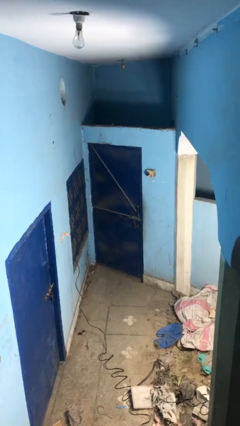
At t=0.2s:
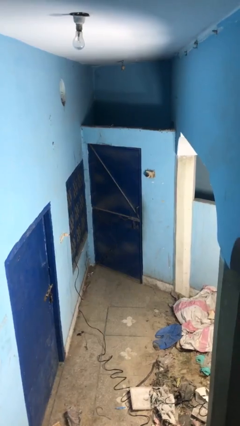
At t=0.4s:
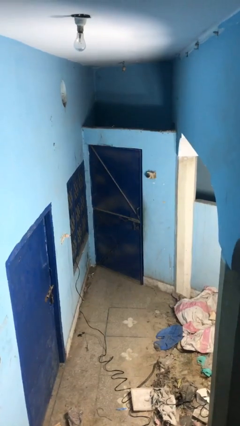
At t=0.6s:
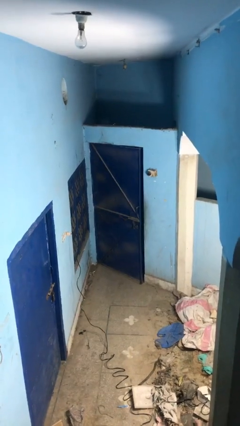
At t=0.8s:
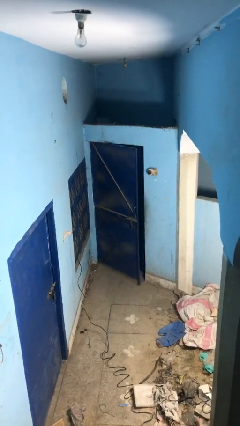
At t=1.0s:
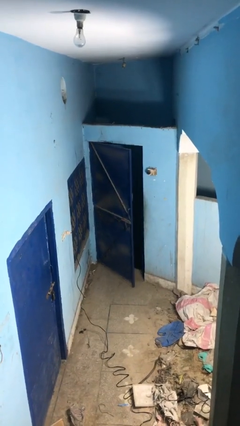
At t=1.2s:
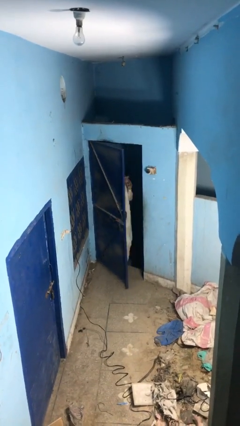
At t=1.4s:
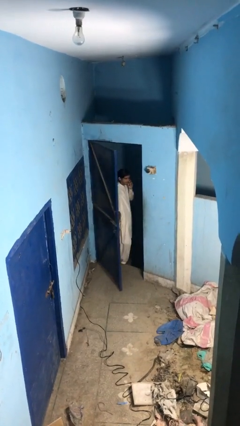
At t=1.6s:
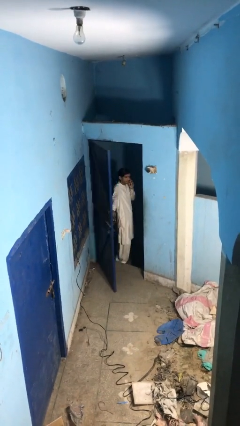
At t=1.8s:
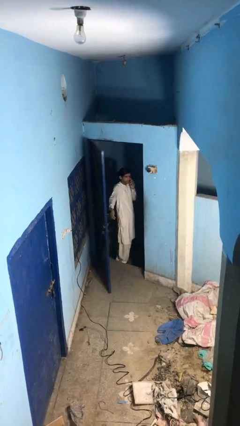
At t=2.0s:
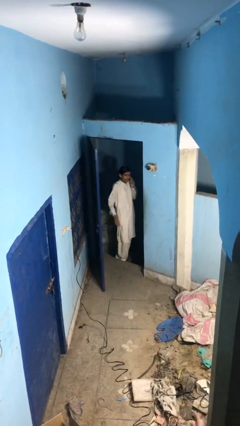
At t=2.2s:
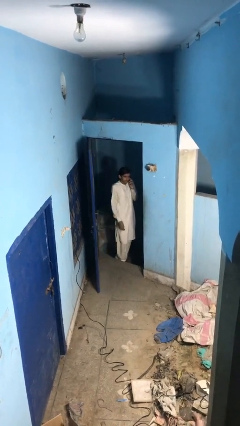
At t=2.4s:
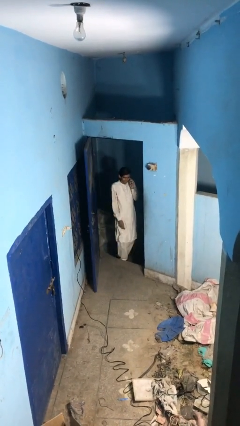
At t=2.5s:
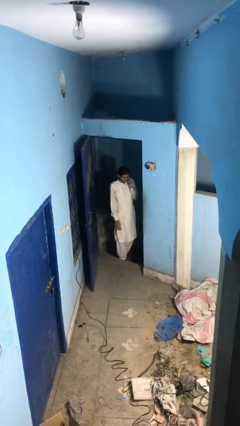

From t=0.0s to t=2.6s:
person opens facility door

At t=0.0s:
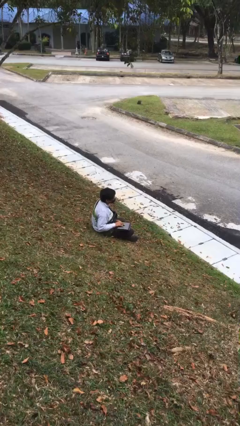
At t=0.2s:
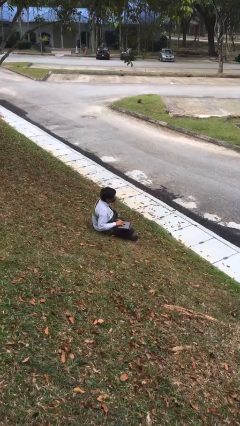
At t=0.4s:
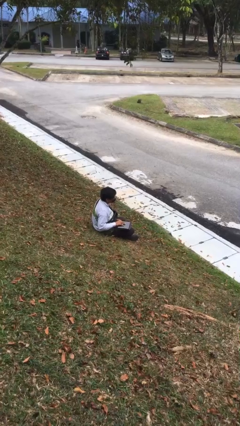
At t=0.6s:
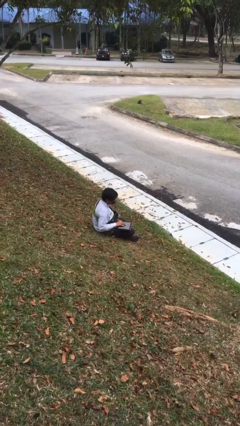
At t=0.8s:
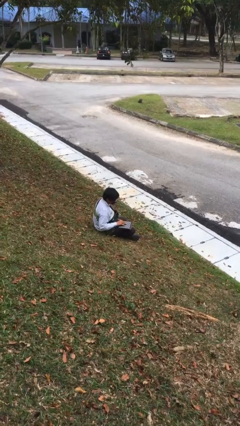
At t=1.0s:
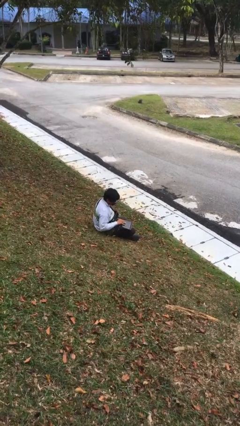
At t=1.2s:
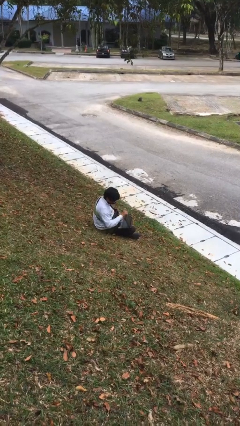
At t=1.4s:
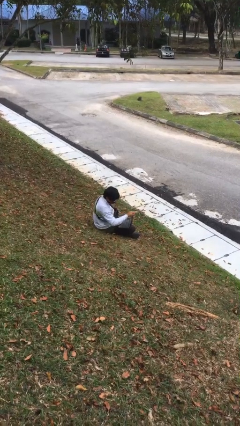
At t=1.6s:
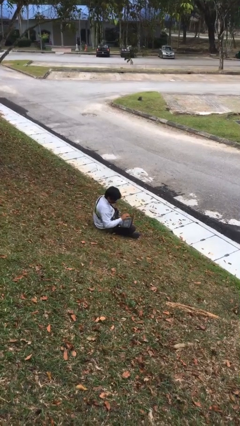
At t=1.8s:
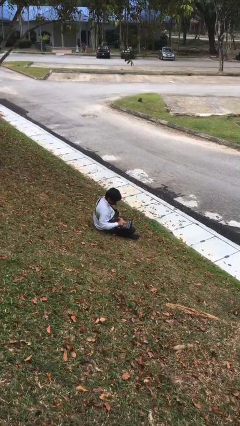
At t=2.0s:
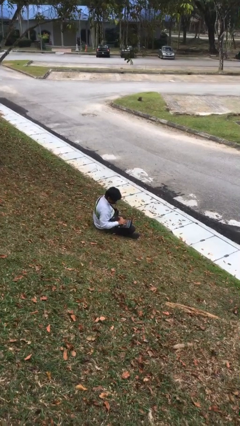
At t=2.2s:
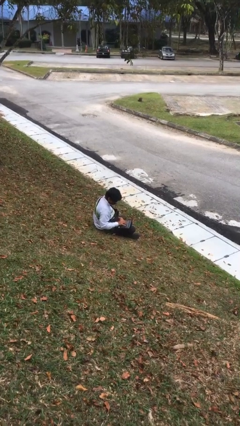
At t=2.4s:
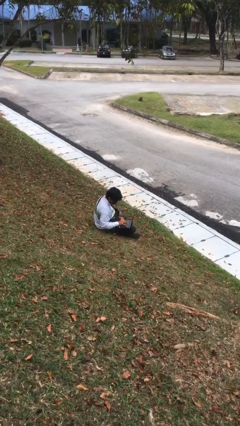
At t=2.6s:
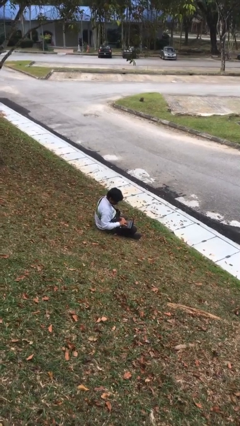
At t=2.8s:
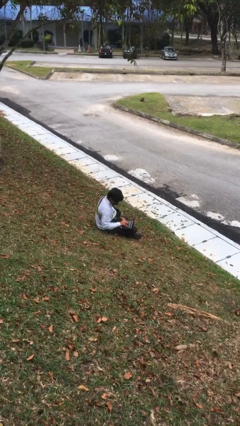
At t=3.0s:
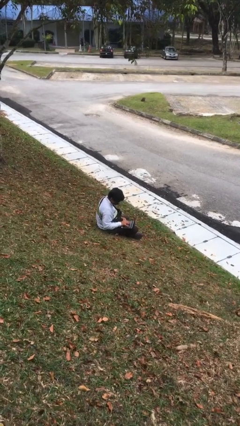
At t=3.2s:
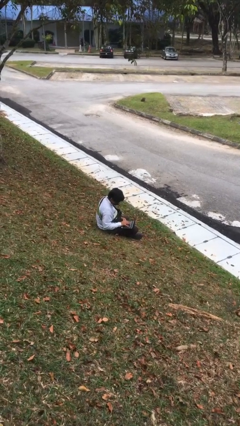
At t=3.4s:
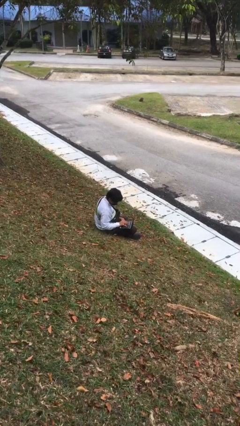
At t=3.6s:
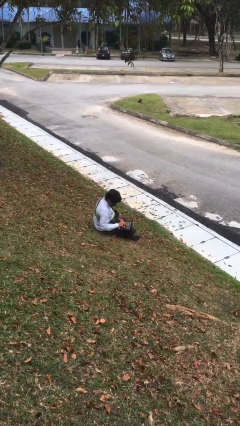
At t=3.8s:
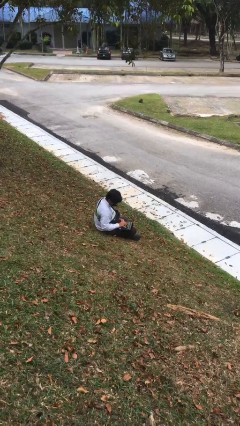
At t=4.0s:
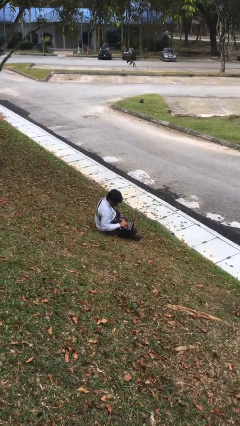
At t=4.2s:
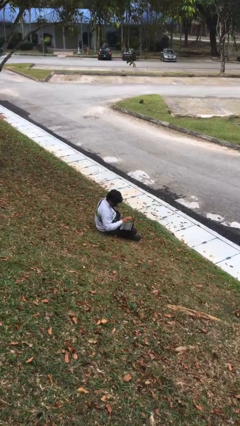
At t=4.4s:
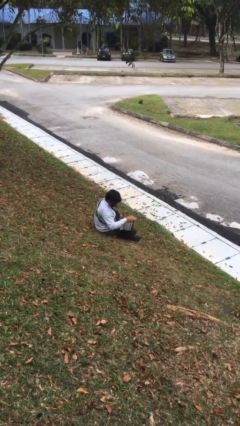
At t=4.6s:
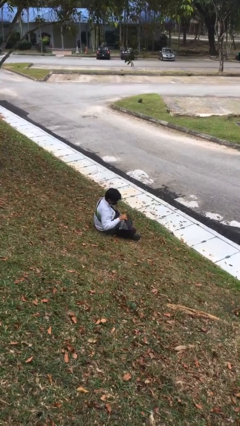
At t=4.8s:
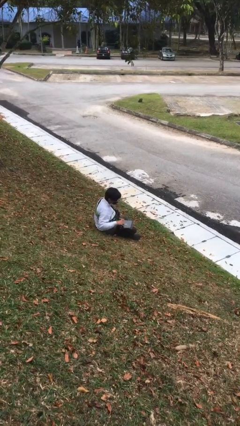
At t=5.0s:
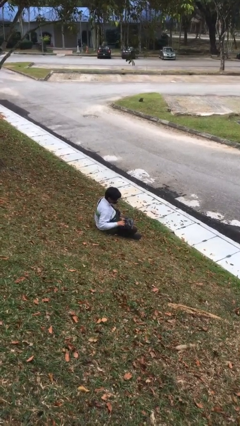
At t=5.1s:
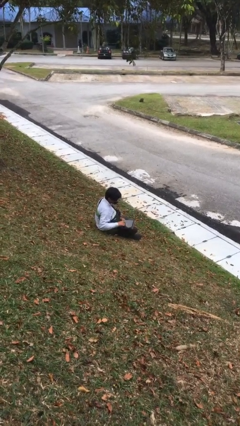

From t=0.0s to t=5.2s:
person interacts with laptop

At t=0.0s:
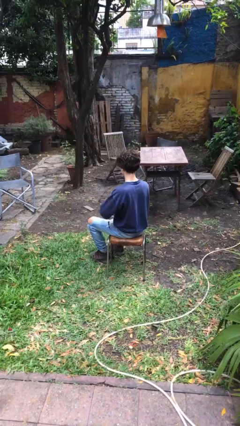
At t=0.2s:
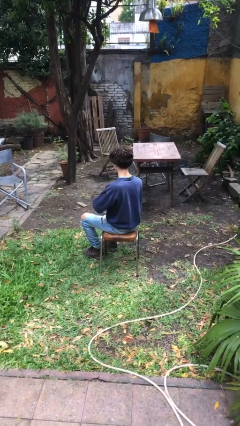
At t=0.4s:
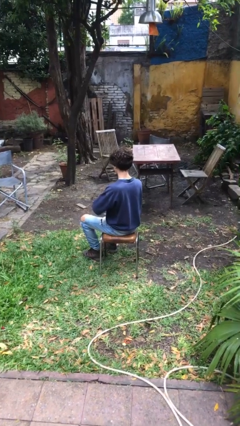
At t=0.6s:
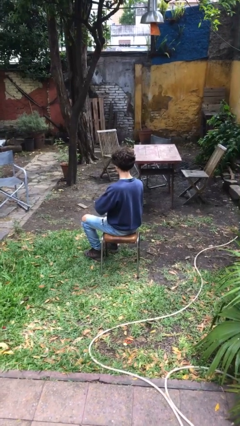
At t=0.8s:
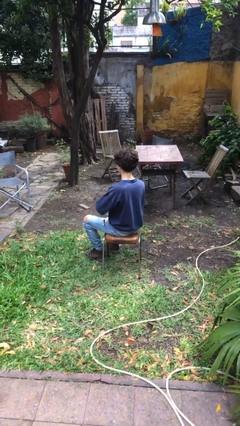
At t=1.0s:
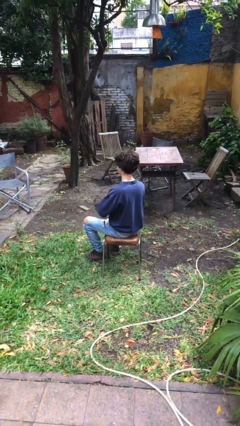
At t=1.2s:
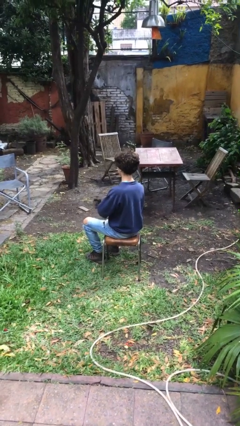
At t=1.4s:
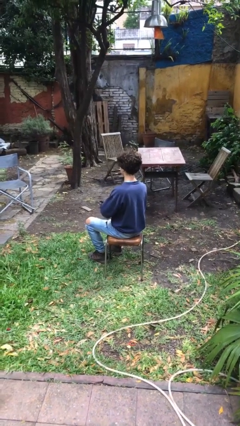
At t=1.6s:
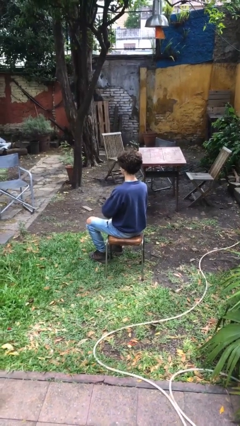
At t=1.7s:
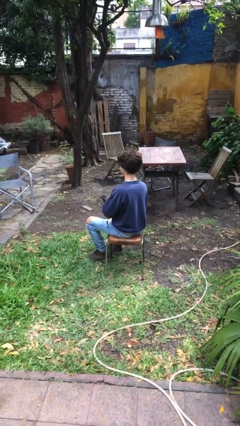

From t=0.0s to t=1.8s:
person takes off gloves

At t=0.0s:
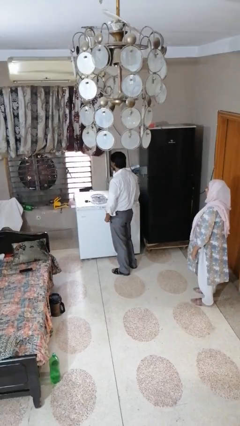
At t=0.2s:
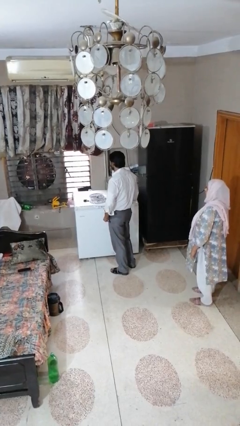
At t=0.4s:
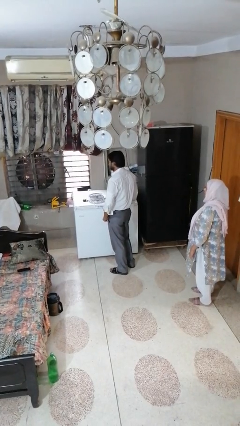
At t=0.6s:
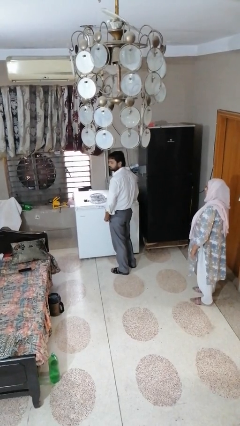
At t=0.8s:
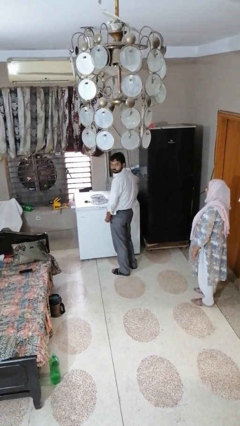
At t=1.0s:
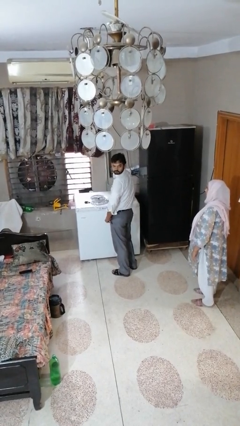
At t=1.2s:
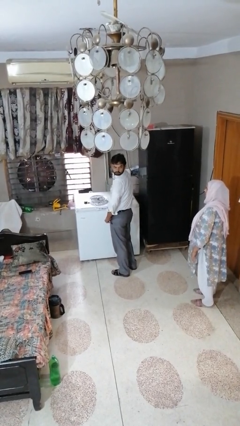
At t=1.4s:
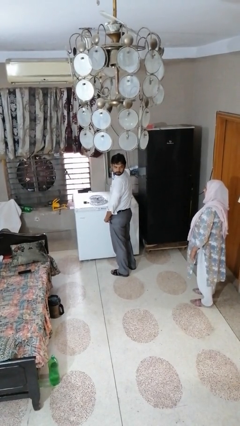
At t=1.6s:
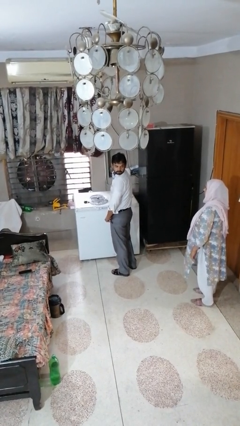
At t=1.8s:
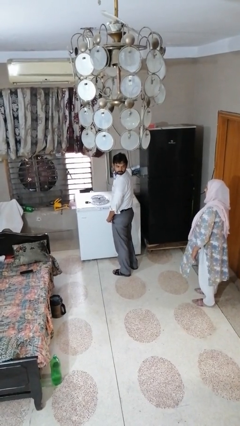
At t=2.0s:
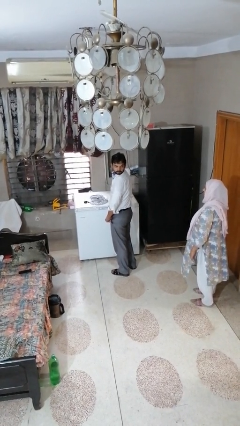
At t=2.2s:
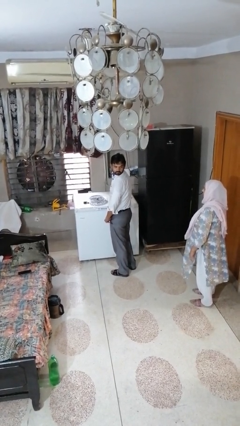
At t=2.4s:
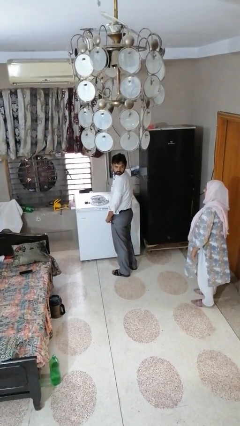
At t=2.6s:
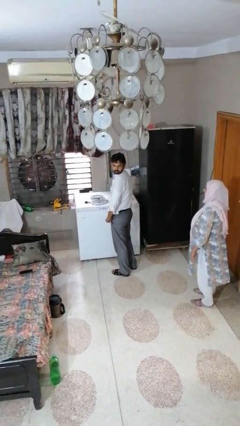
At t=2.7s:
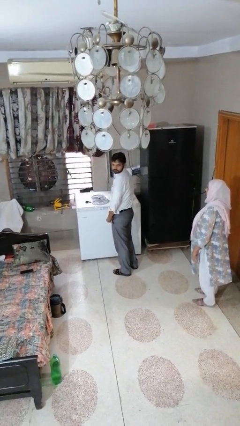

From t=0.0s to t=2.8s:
person looks over shoulder

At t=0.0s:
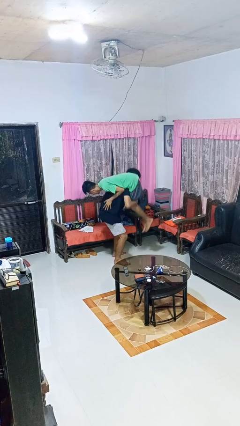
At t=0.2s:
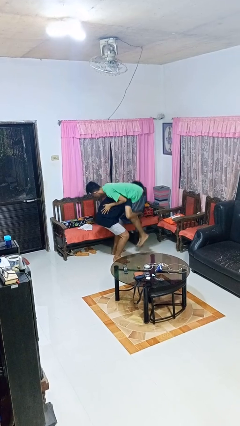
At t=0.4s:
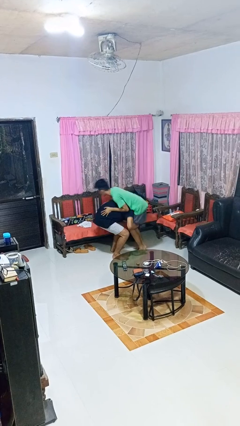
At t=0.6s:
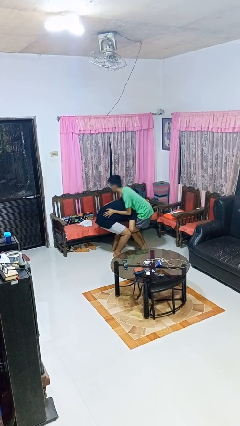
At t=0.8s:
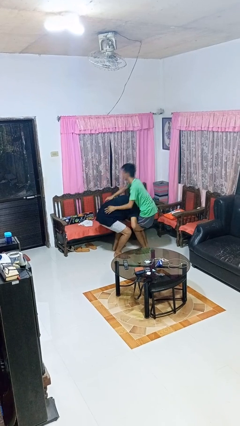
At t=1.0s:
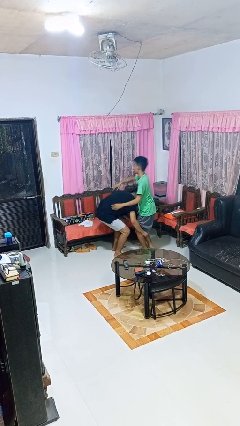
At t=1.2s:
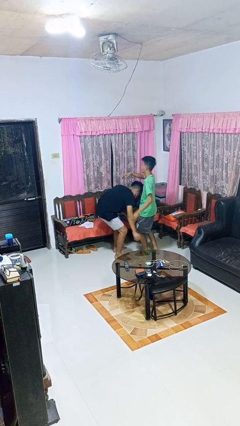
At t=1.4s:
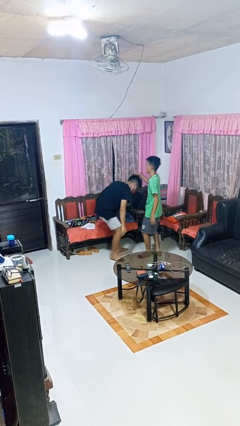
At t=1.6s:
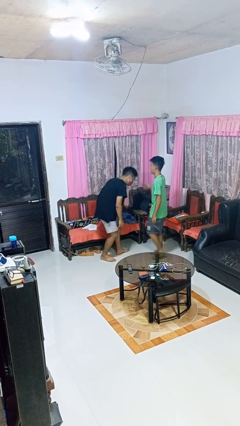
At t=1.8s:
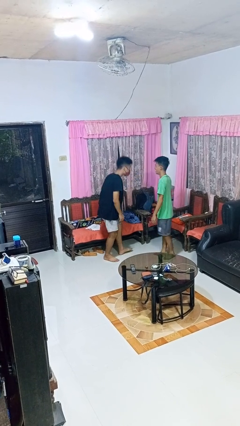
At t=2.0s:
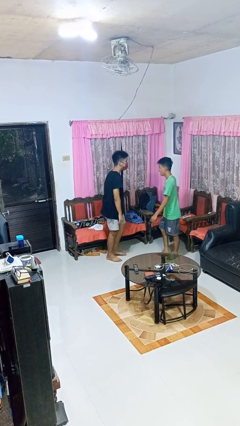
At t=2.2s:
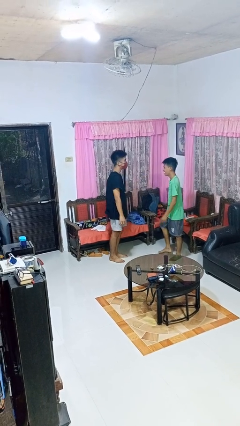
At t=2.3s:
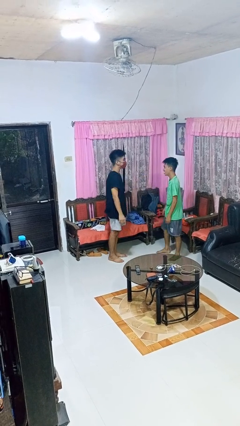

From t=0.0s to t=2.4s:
person puts down person

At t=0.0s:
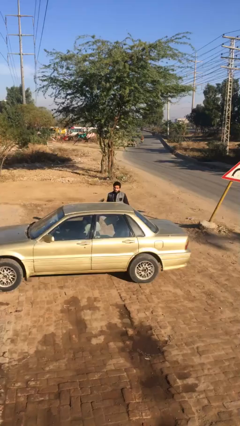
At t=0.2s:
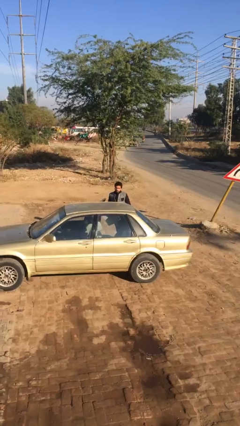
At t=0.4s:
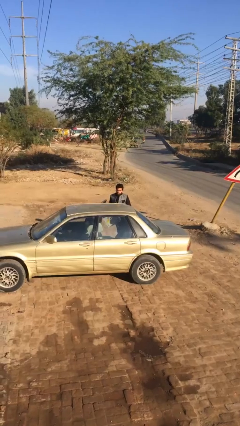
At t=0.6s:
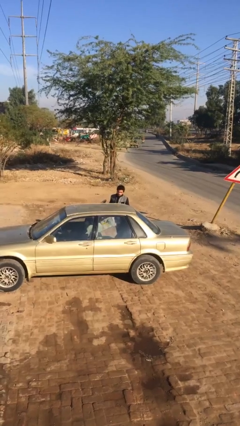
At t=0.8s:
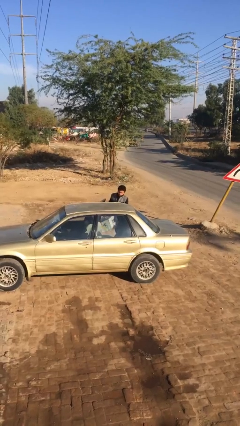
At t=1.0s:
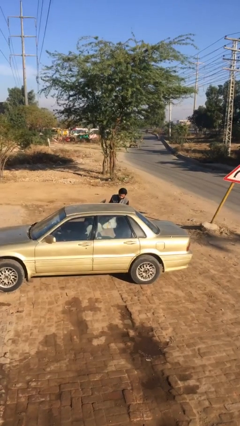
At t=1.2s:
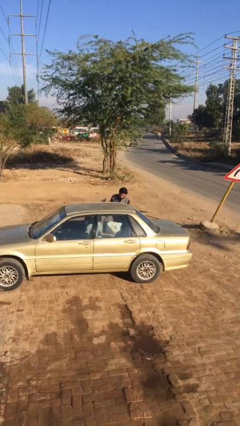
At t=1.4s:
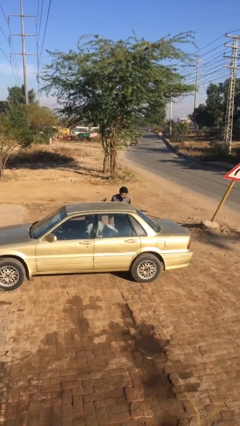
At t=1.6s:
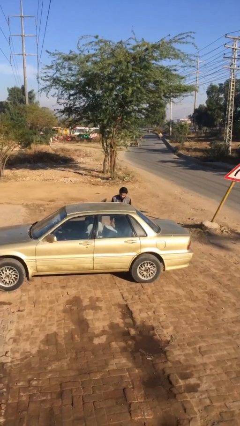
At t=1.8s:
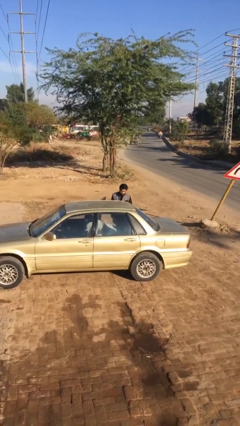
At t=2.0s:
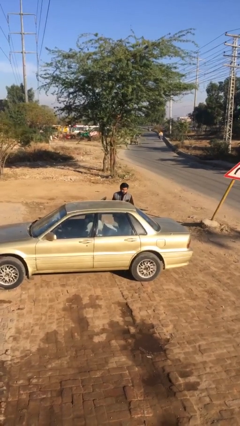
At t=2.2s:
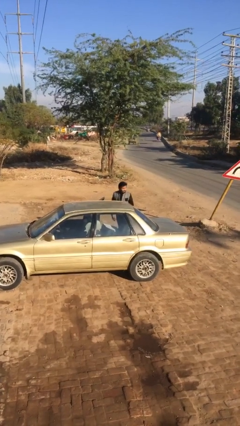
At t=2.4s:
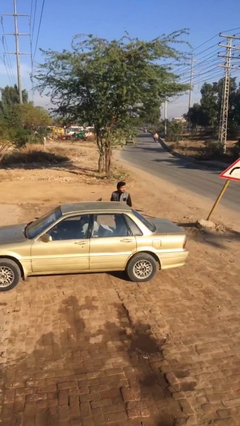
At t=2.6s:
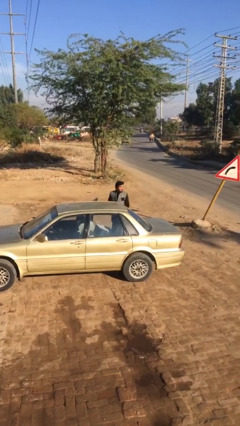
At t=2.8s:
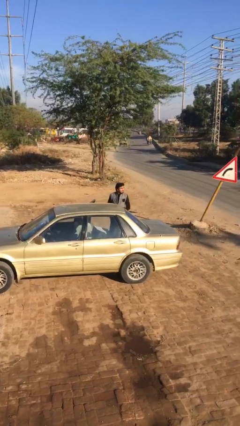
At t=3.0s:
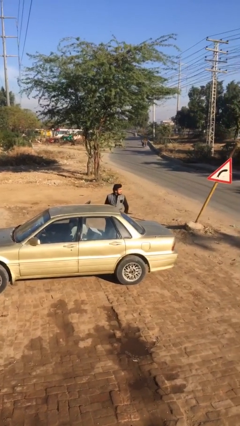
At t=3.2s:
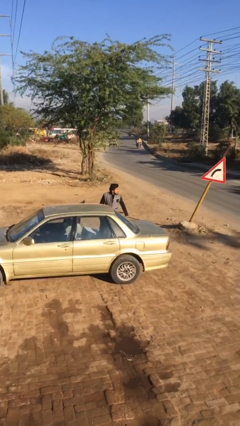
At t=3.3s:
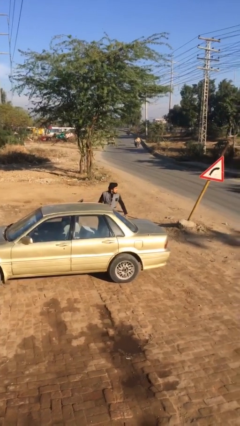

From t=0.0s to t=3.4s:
person loads car
